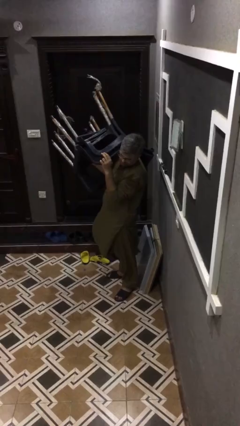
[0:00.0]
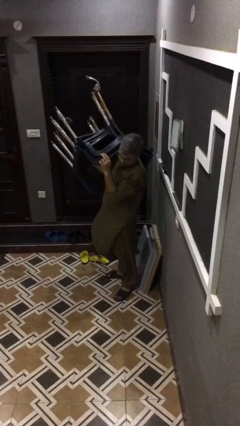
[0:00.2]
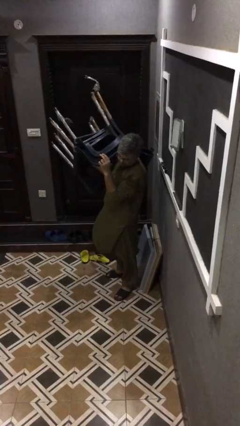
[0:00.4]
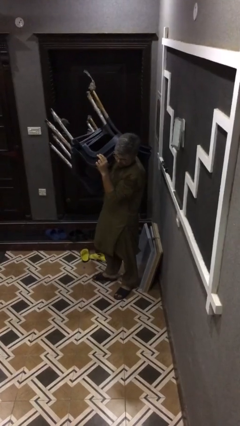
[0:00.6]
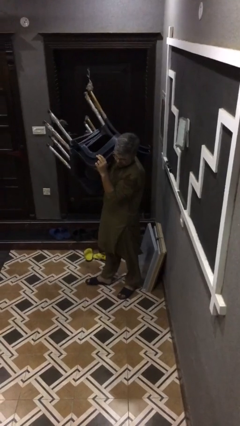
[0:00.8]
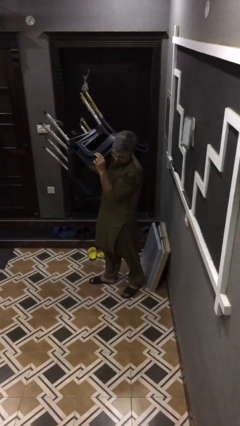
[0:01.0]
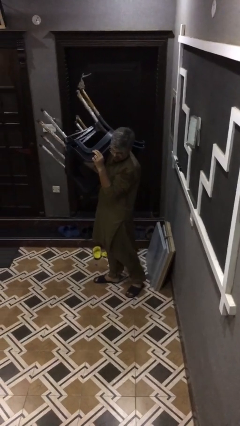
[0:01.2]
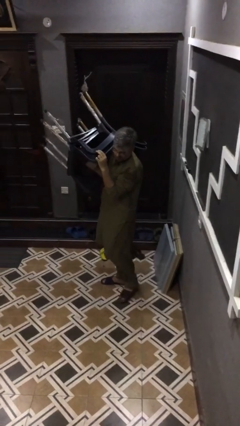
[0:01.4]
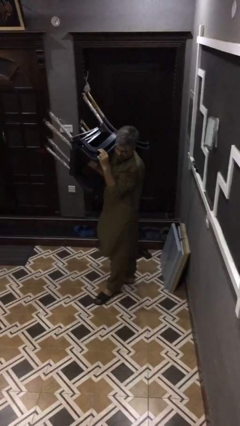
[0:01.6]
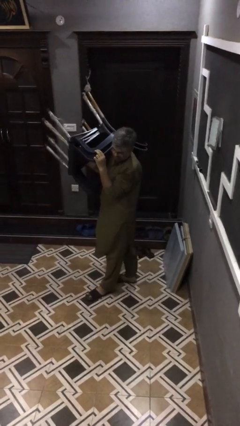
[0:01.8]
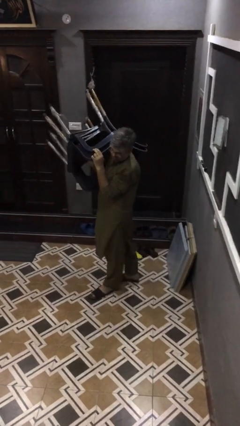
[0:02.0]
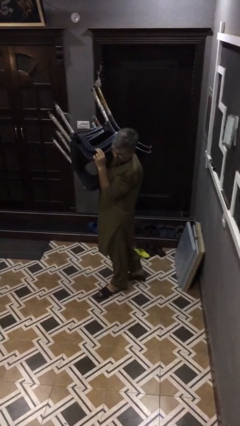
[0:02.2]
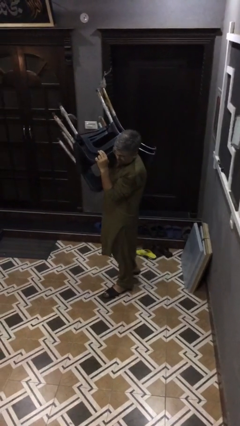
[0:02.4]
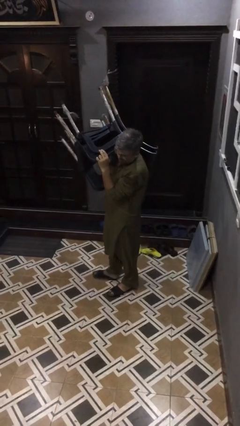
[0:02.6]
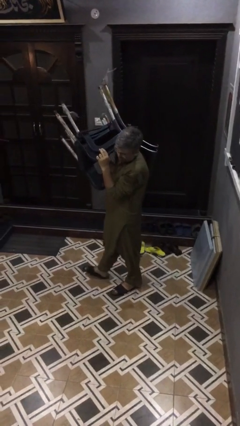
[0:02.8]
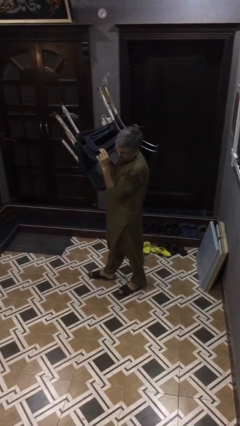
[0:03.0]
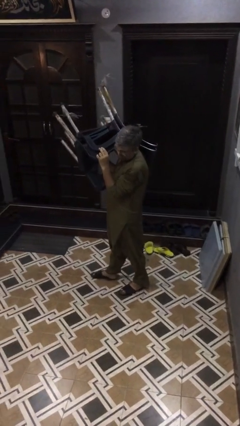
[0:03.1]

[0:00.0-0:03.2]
person carries heavy object

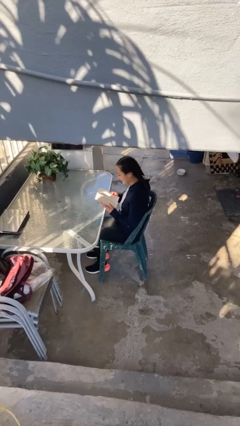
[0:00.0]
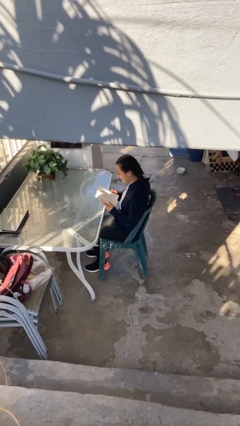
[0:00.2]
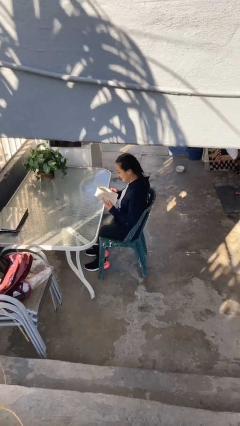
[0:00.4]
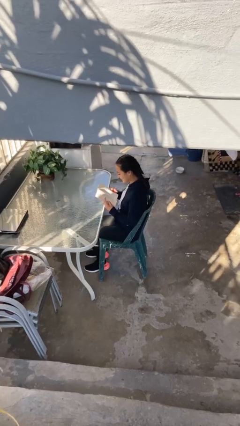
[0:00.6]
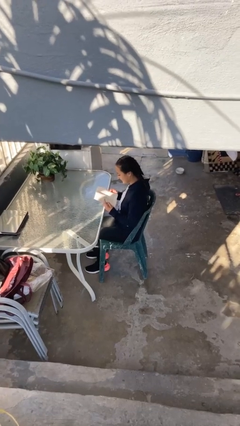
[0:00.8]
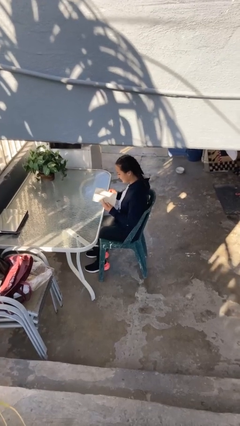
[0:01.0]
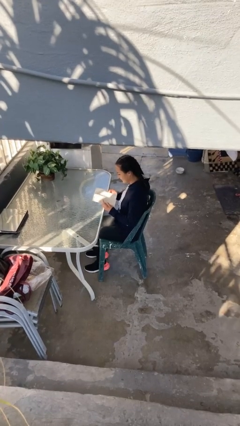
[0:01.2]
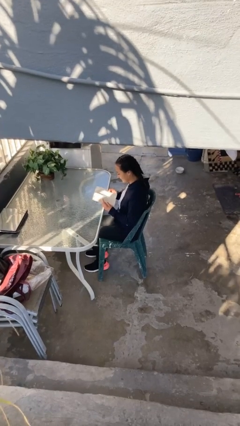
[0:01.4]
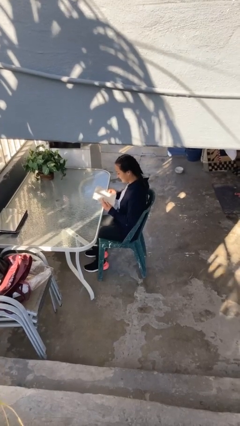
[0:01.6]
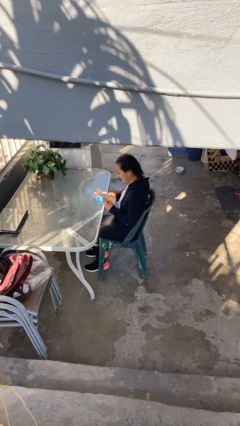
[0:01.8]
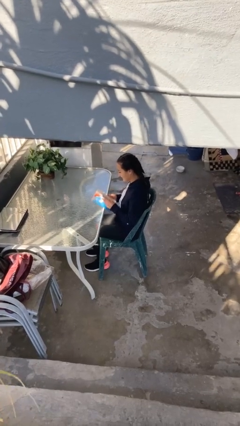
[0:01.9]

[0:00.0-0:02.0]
person reads document

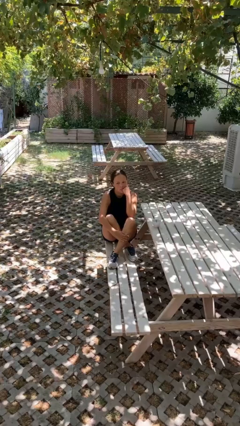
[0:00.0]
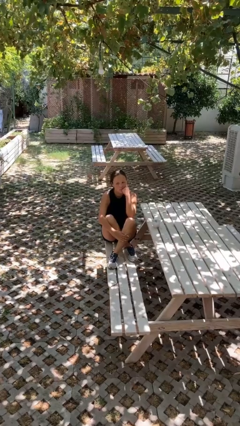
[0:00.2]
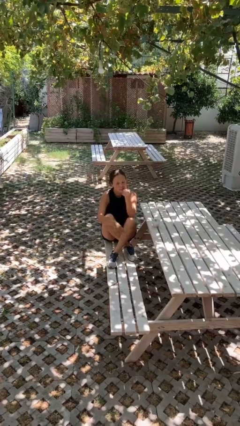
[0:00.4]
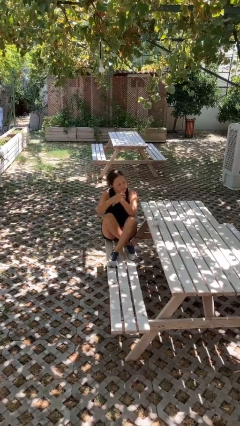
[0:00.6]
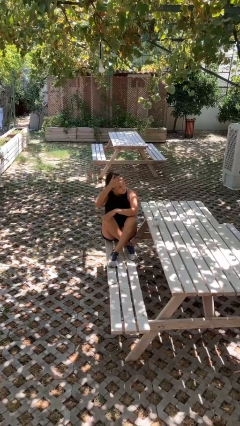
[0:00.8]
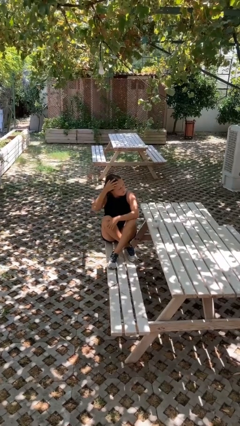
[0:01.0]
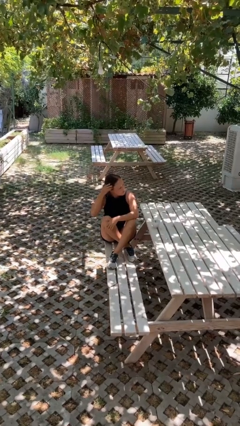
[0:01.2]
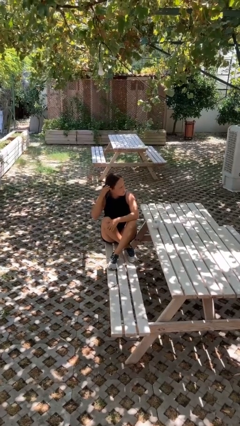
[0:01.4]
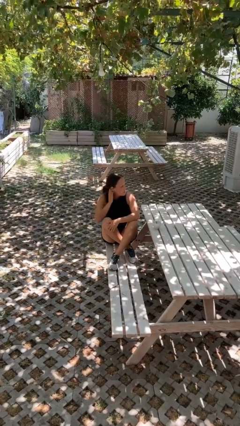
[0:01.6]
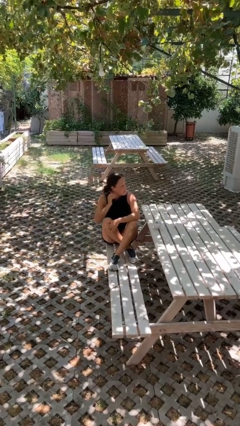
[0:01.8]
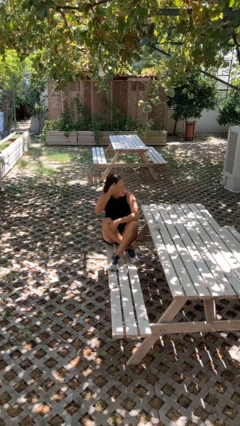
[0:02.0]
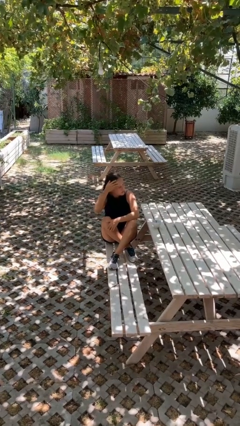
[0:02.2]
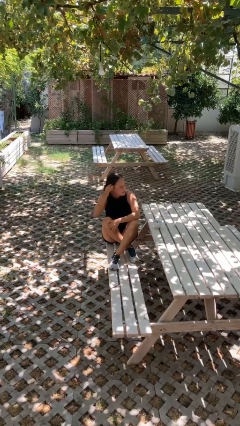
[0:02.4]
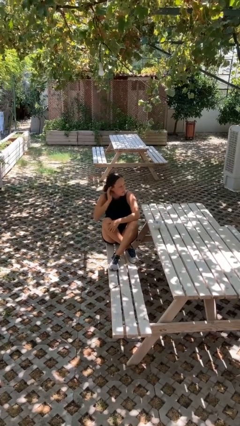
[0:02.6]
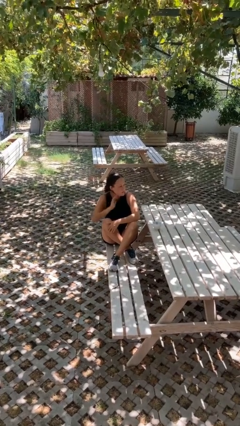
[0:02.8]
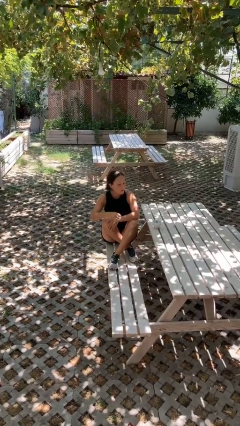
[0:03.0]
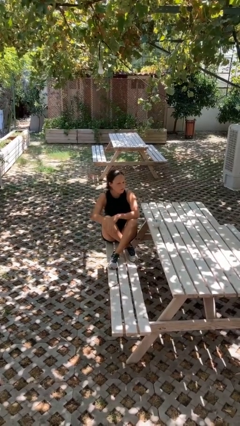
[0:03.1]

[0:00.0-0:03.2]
person strokes hair

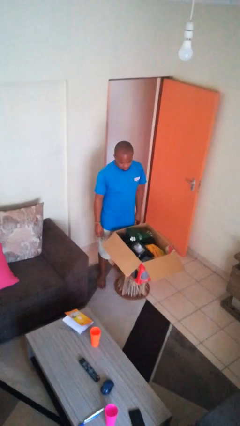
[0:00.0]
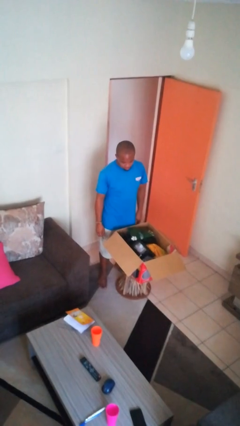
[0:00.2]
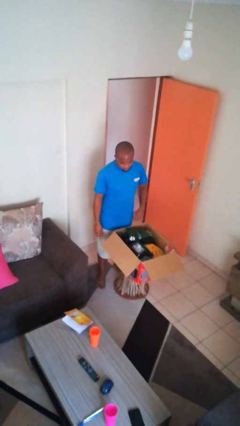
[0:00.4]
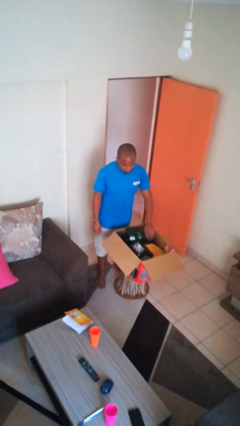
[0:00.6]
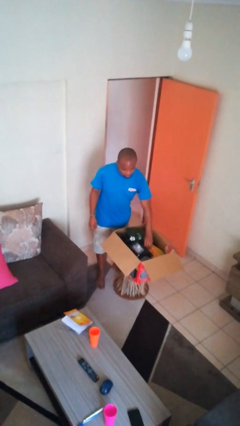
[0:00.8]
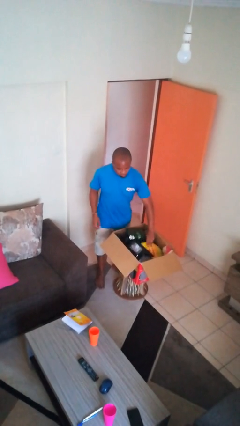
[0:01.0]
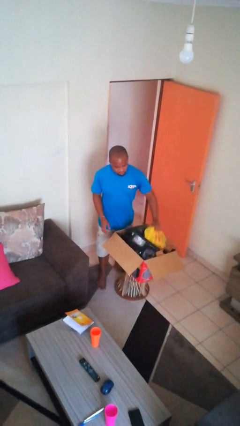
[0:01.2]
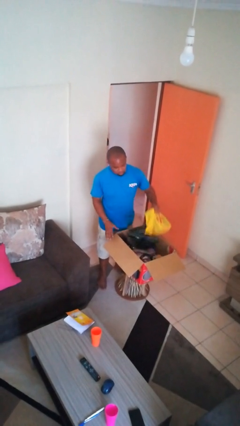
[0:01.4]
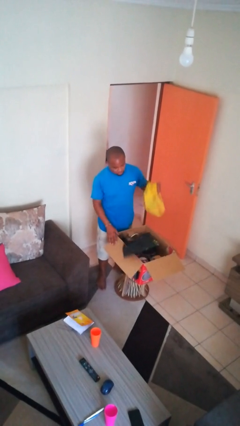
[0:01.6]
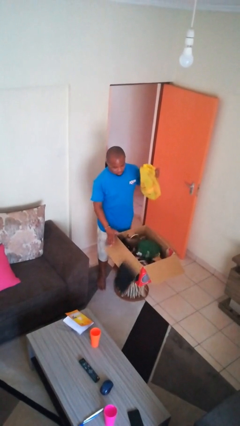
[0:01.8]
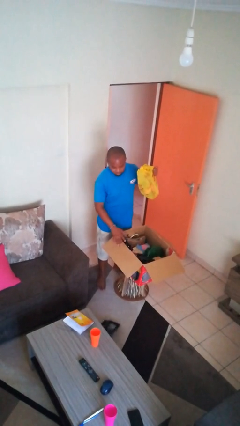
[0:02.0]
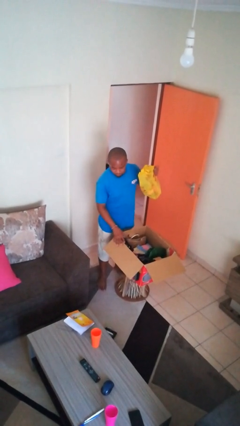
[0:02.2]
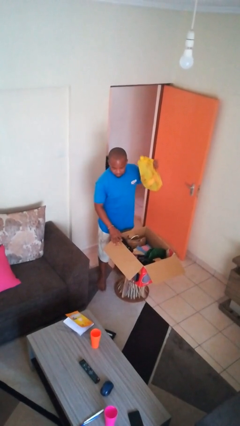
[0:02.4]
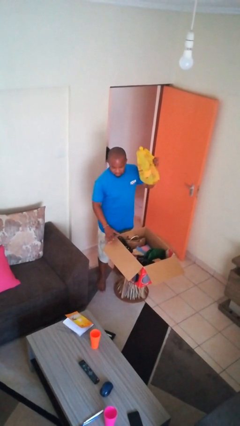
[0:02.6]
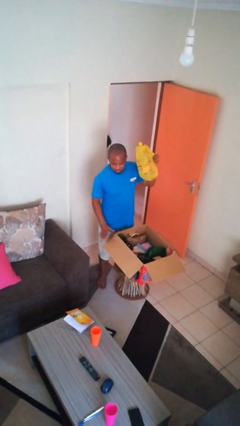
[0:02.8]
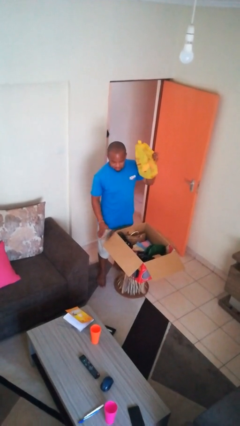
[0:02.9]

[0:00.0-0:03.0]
person takes object from box

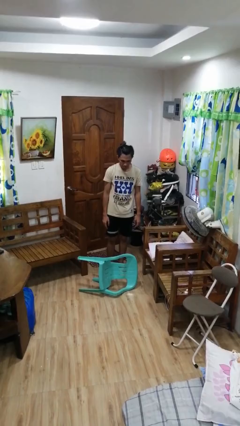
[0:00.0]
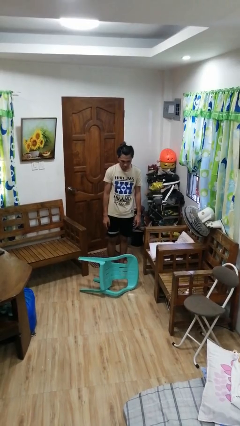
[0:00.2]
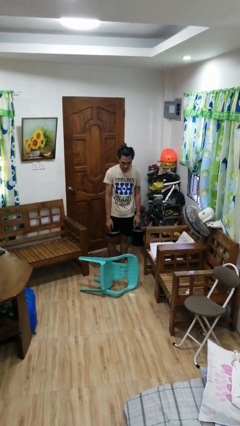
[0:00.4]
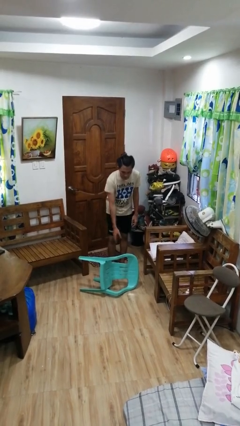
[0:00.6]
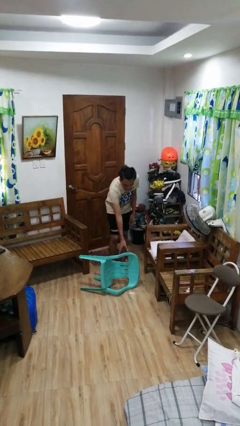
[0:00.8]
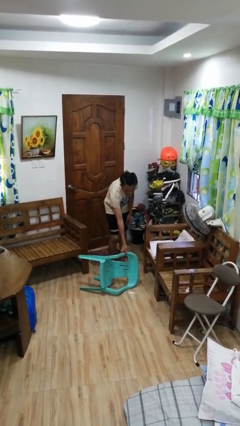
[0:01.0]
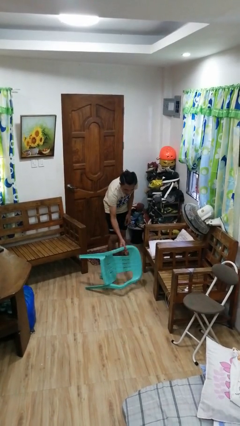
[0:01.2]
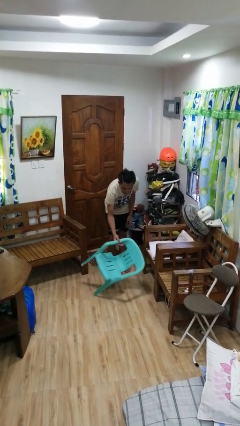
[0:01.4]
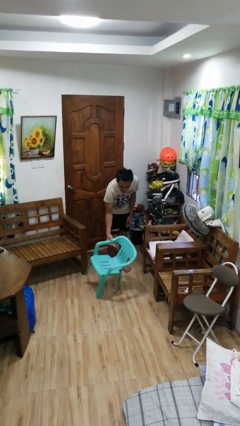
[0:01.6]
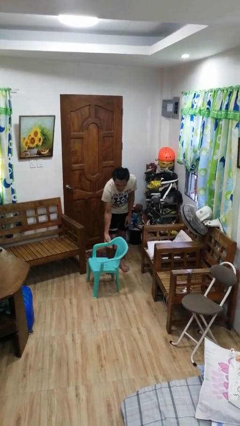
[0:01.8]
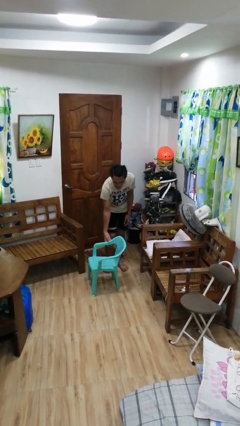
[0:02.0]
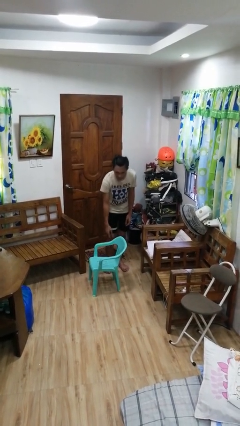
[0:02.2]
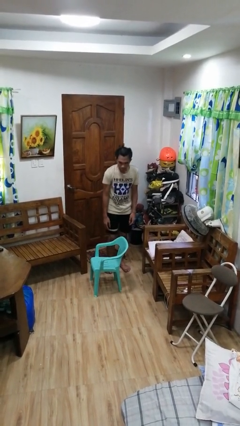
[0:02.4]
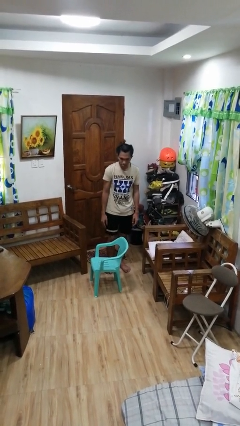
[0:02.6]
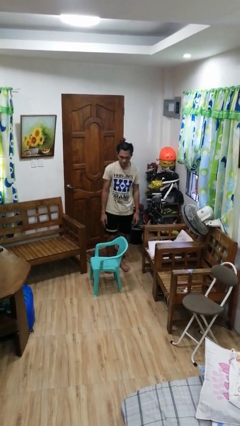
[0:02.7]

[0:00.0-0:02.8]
person sets upright furniture

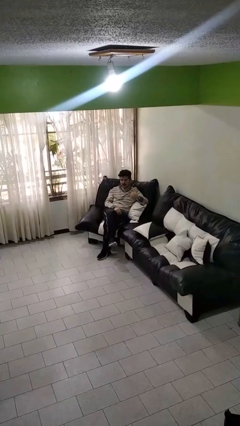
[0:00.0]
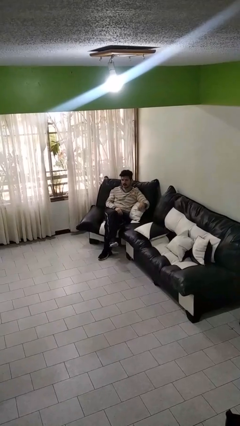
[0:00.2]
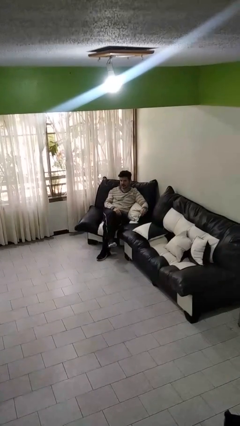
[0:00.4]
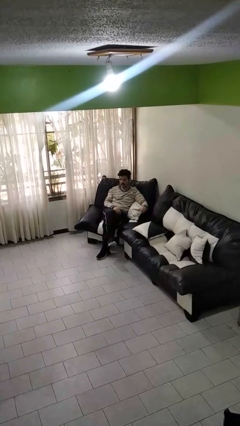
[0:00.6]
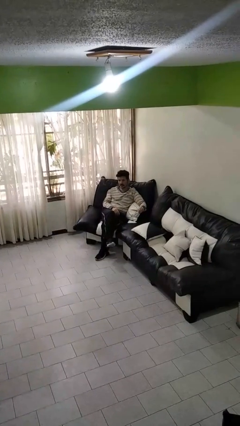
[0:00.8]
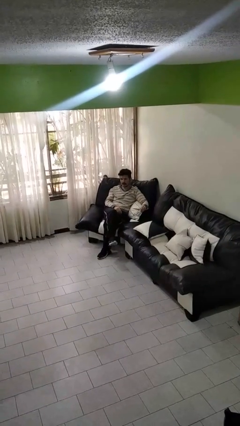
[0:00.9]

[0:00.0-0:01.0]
person takes off glasses

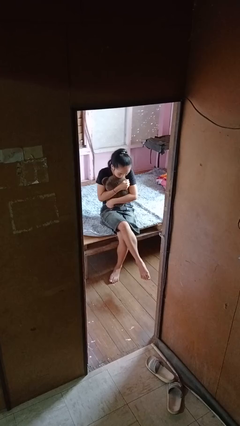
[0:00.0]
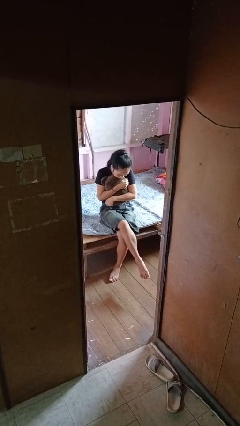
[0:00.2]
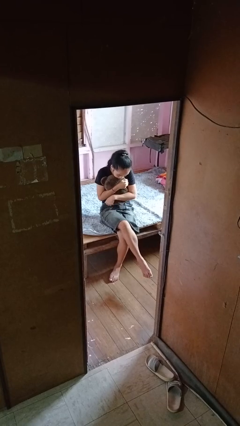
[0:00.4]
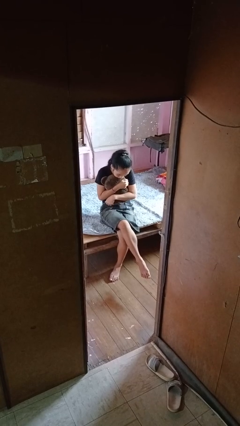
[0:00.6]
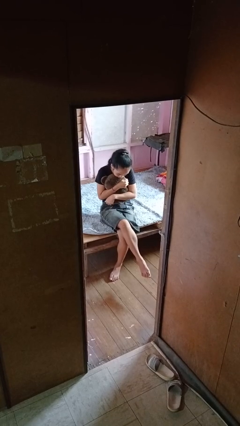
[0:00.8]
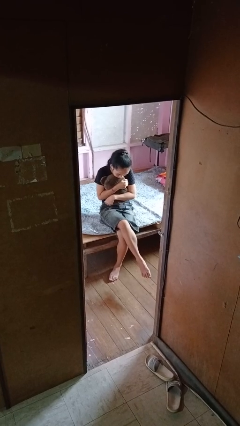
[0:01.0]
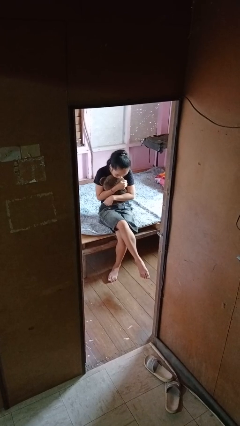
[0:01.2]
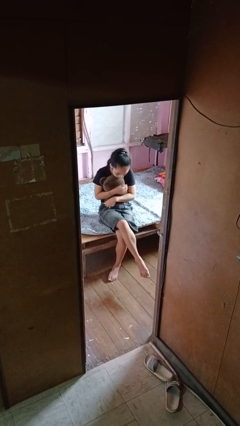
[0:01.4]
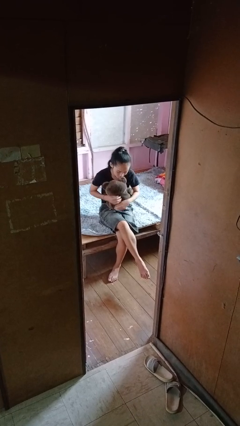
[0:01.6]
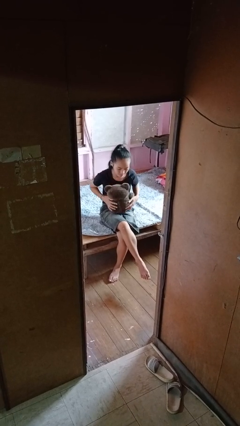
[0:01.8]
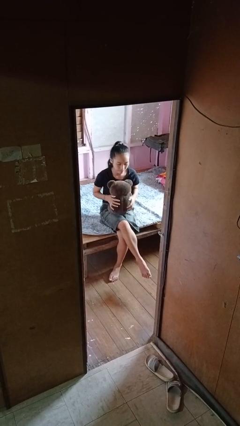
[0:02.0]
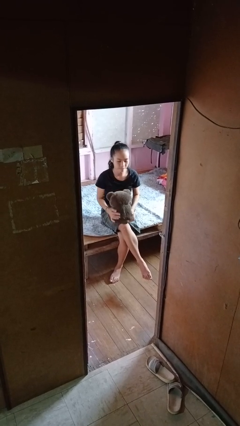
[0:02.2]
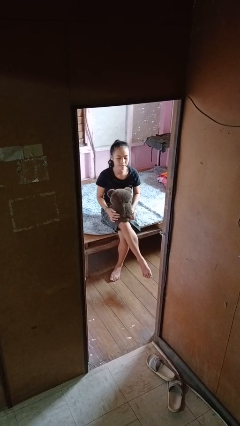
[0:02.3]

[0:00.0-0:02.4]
person hugs stuffed animal
